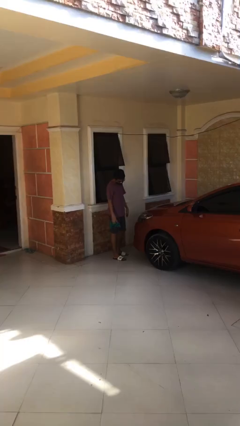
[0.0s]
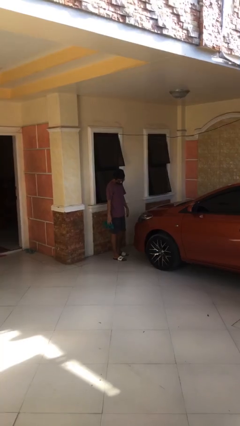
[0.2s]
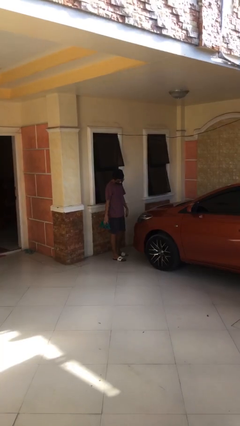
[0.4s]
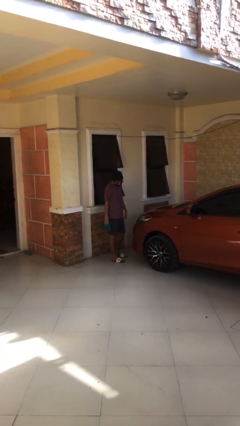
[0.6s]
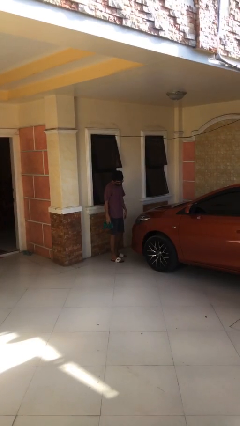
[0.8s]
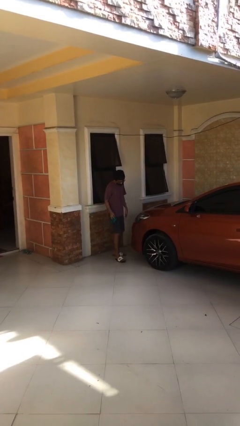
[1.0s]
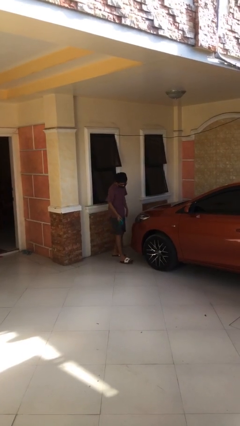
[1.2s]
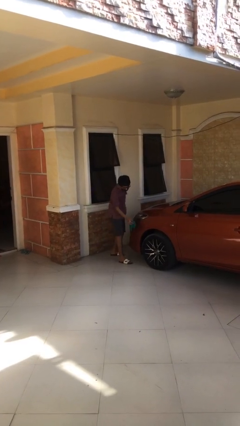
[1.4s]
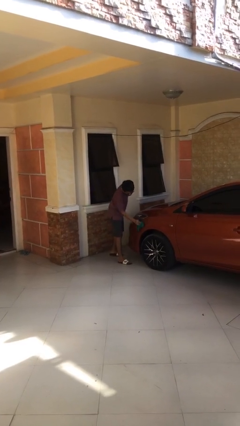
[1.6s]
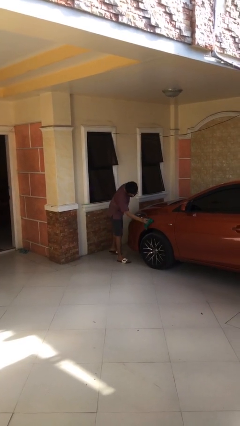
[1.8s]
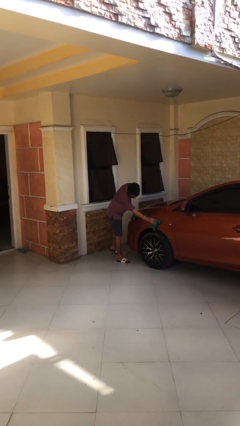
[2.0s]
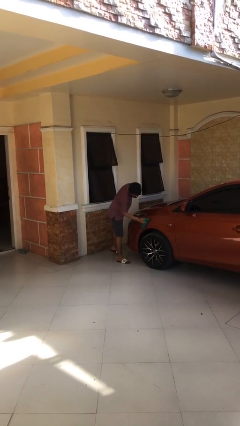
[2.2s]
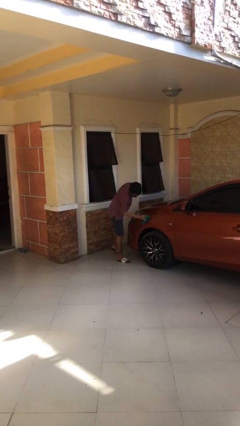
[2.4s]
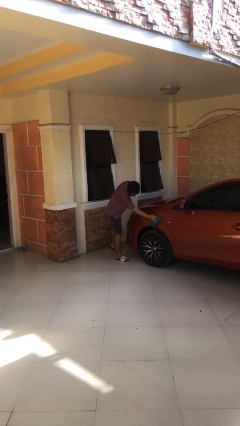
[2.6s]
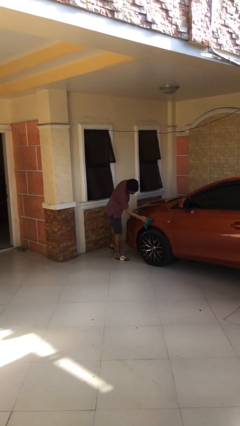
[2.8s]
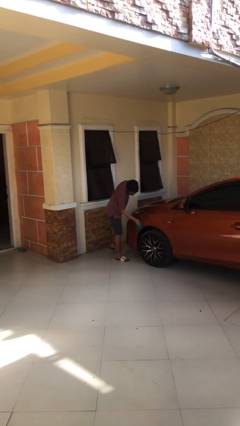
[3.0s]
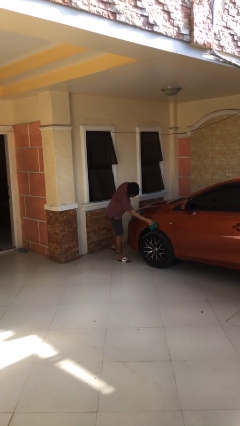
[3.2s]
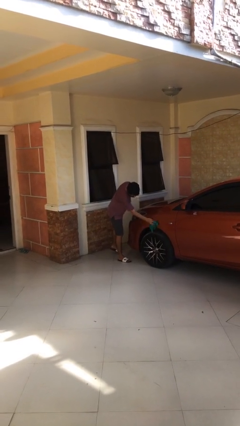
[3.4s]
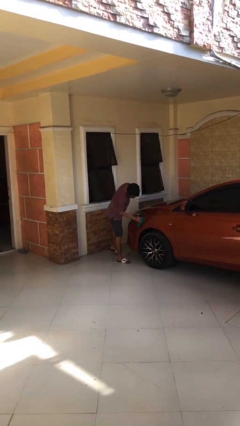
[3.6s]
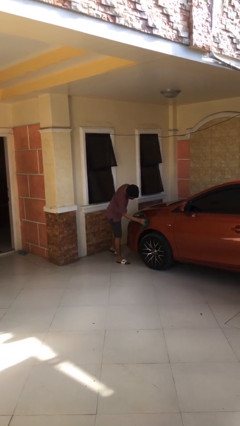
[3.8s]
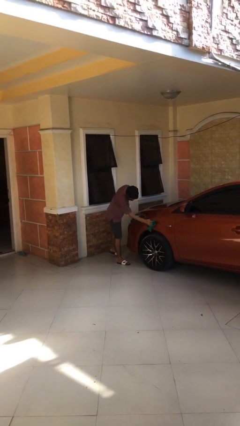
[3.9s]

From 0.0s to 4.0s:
person polishes car with rag

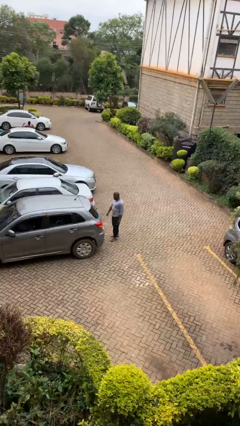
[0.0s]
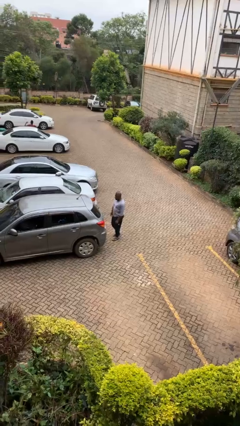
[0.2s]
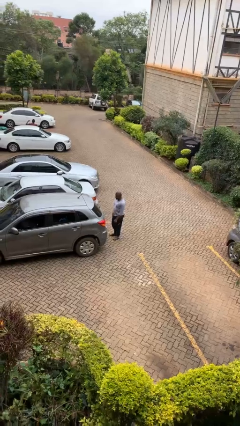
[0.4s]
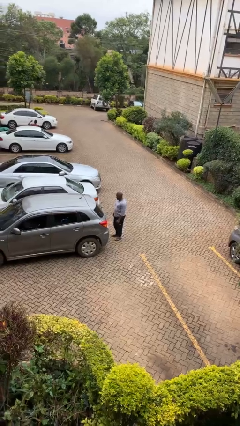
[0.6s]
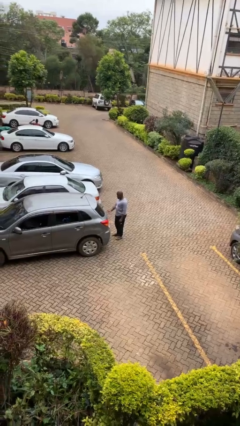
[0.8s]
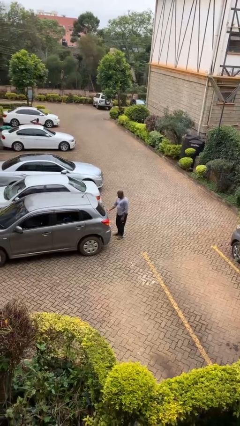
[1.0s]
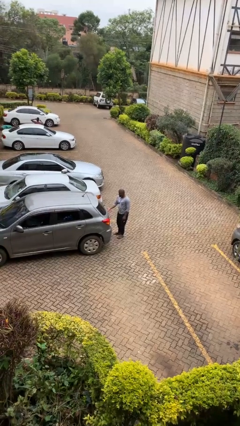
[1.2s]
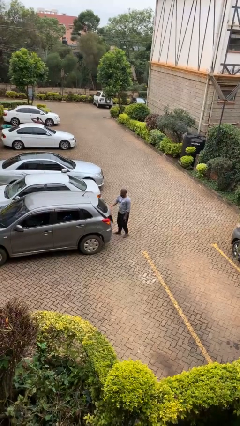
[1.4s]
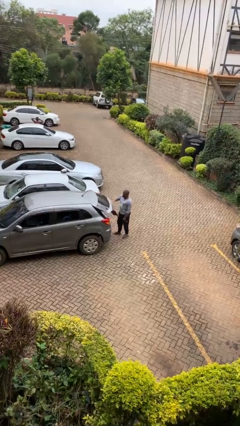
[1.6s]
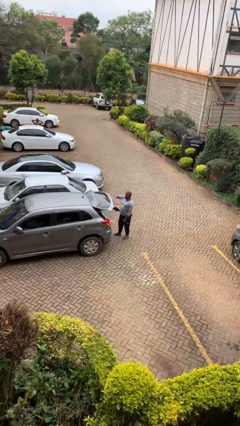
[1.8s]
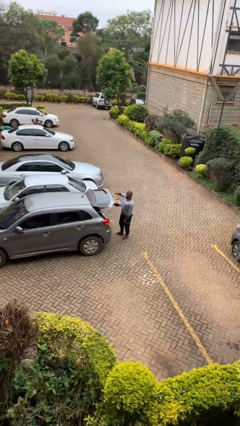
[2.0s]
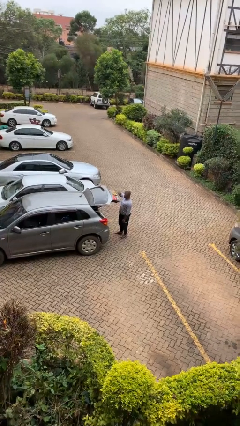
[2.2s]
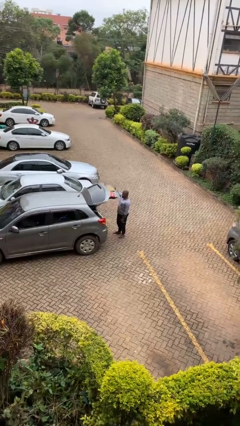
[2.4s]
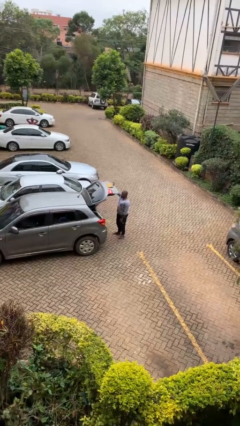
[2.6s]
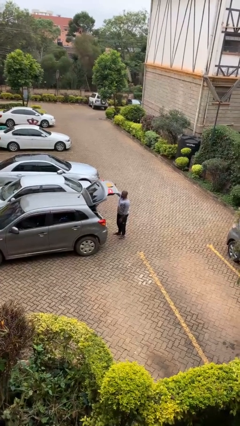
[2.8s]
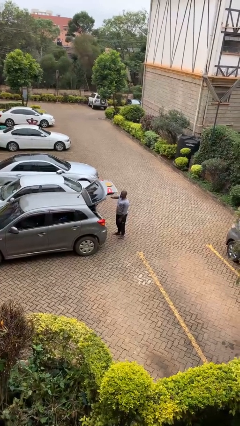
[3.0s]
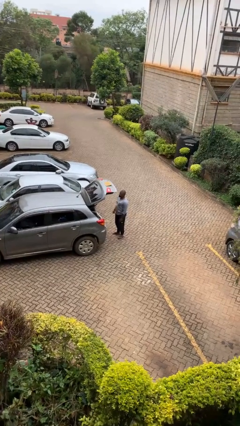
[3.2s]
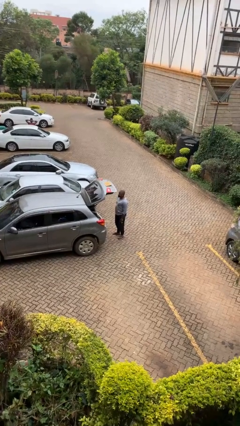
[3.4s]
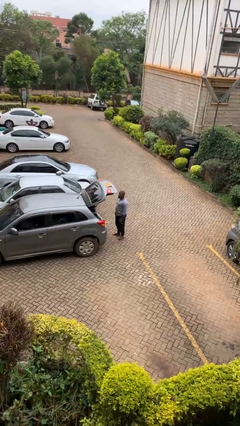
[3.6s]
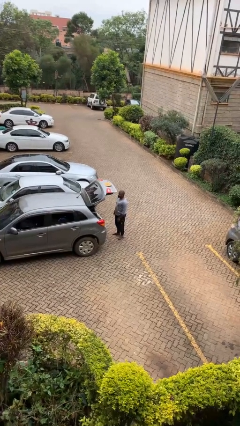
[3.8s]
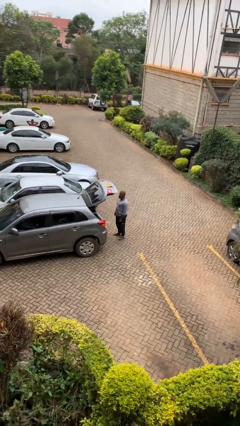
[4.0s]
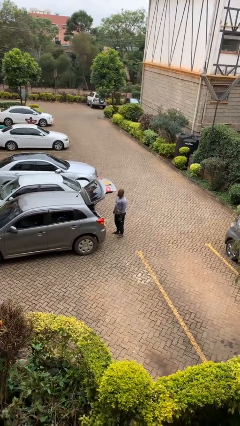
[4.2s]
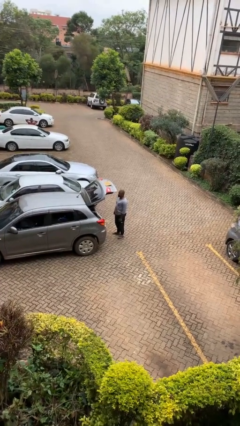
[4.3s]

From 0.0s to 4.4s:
person opens car trunk

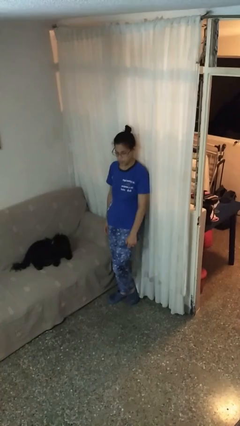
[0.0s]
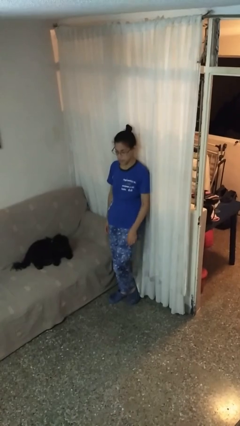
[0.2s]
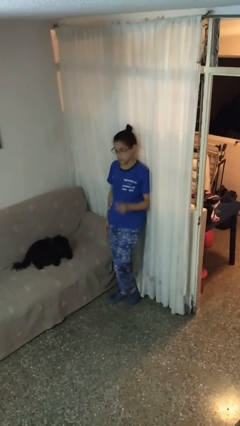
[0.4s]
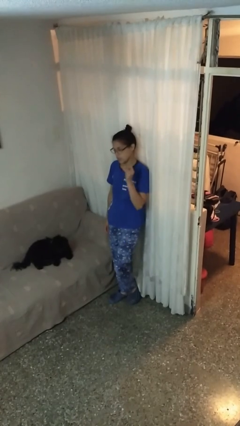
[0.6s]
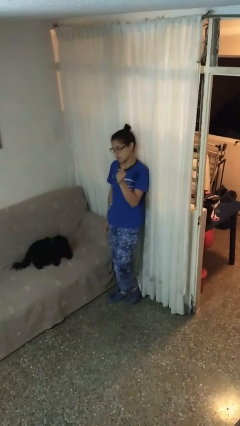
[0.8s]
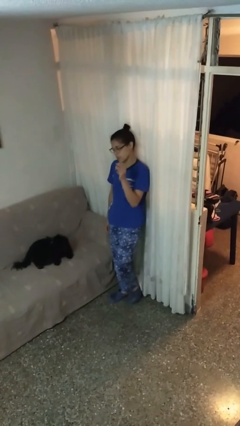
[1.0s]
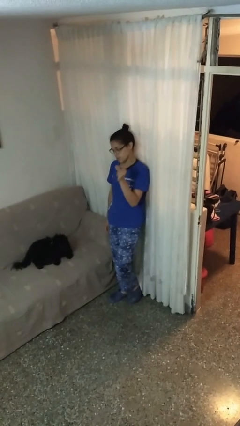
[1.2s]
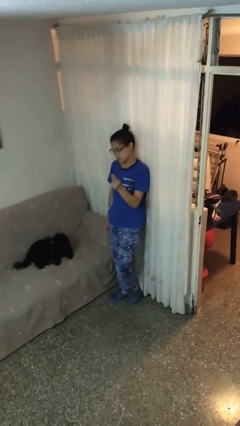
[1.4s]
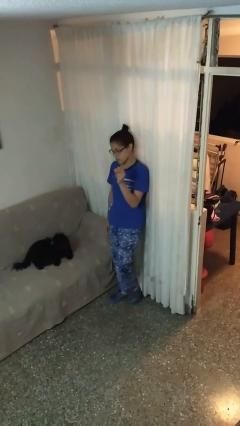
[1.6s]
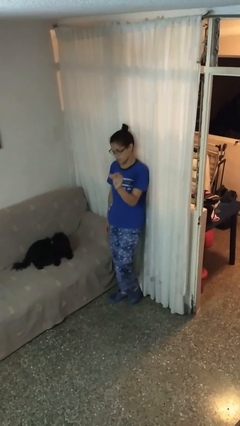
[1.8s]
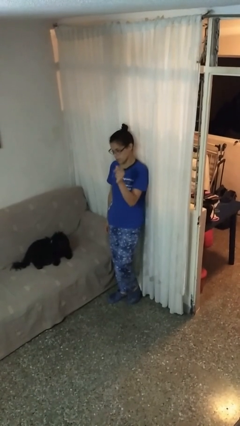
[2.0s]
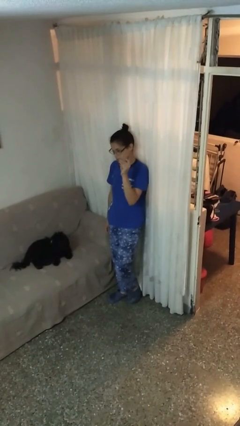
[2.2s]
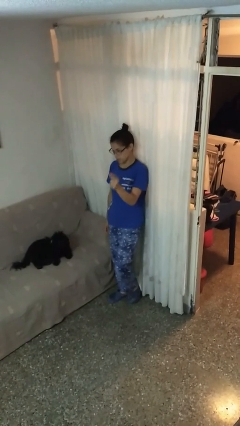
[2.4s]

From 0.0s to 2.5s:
person snaps fingers

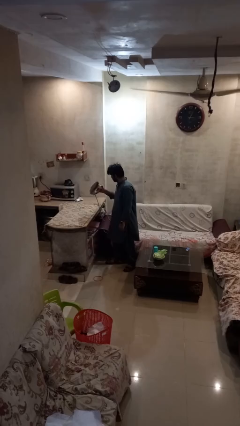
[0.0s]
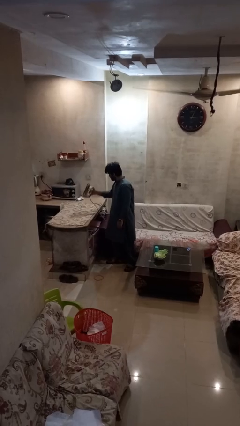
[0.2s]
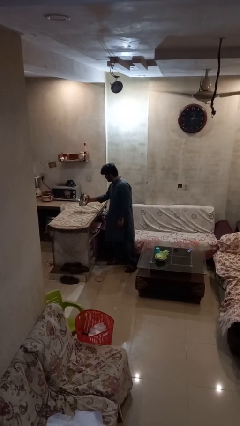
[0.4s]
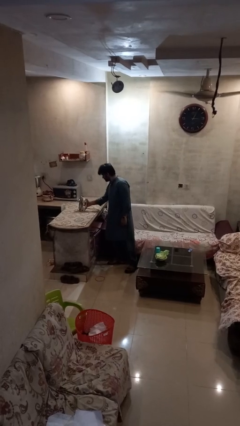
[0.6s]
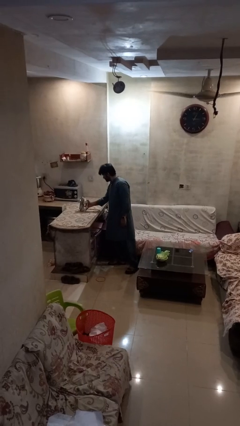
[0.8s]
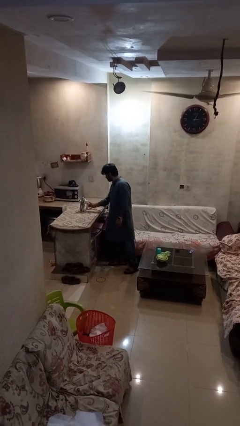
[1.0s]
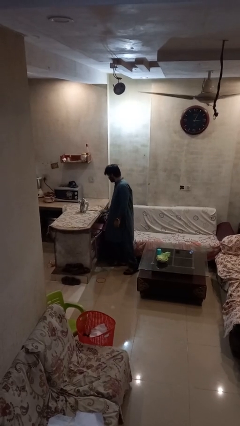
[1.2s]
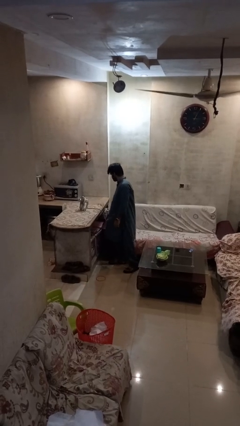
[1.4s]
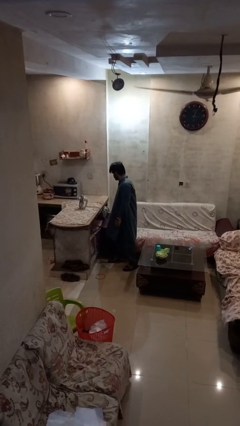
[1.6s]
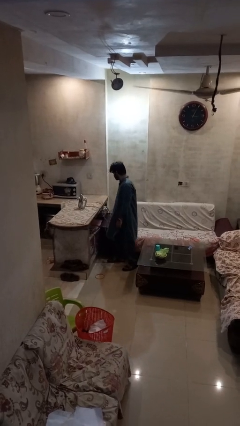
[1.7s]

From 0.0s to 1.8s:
person puts down object on countertop

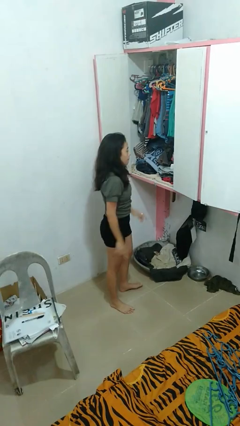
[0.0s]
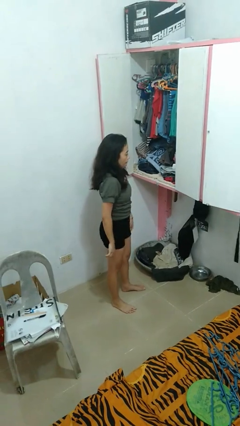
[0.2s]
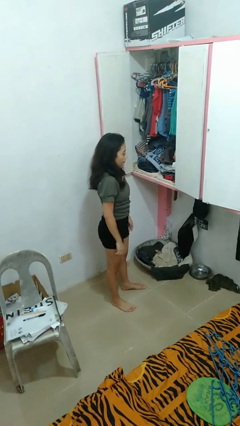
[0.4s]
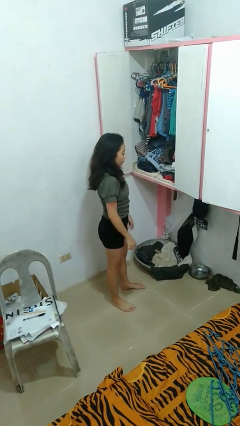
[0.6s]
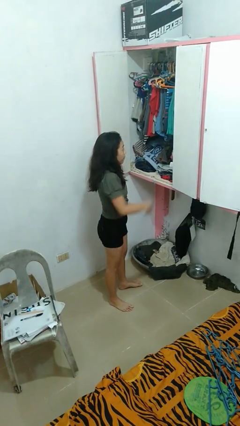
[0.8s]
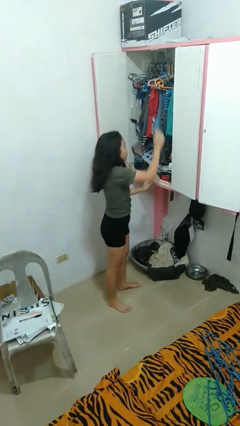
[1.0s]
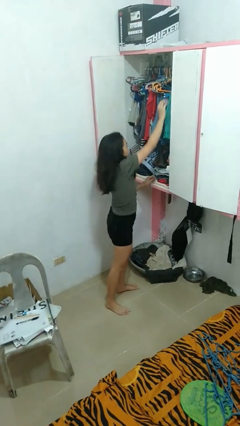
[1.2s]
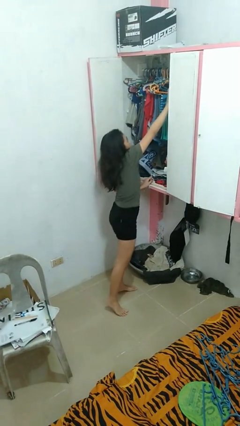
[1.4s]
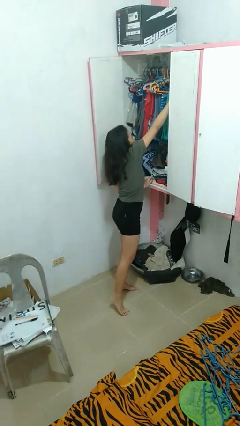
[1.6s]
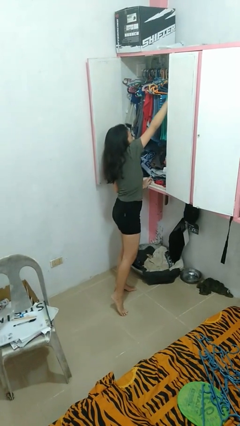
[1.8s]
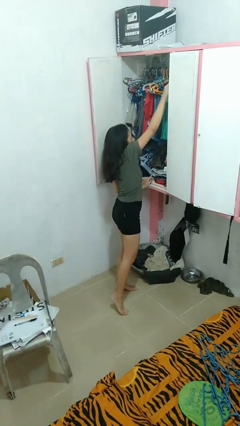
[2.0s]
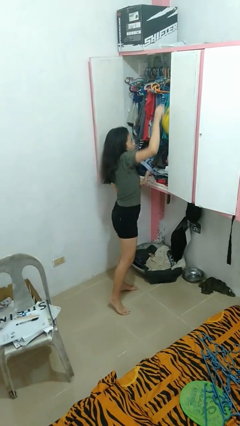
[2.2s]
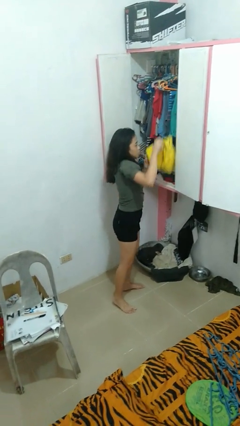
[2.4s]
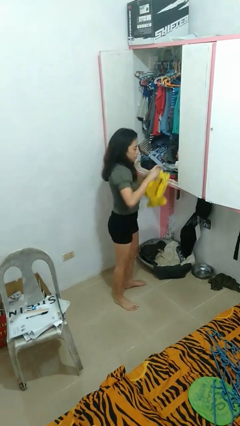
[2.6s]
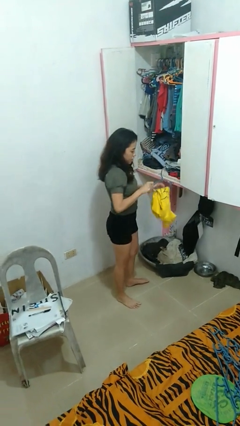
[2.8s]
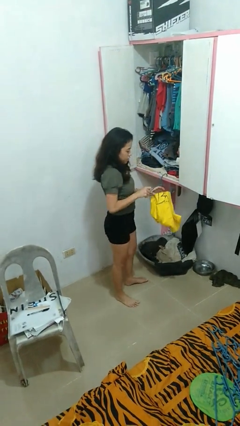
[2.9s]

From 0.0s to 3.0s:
person takes clothes from closet

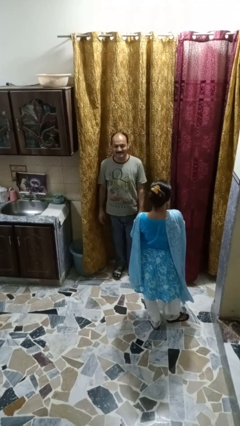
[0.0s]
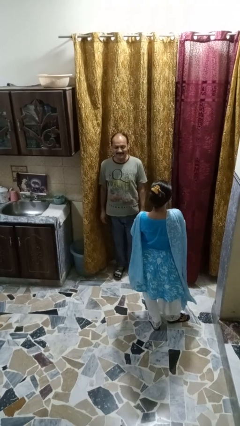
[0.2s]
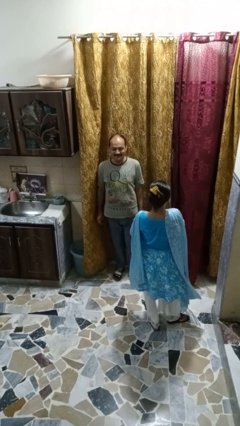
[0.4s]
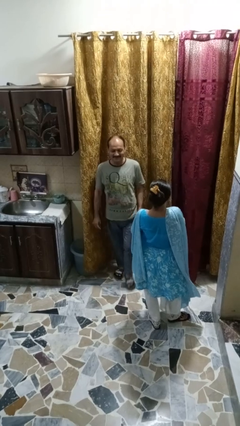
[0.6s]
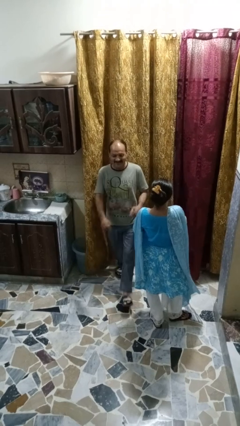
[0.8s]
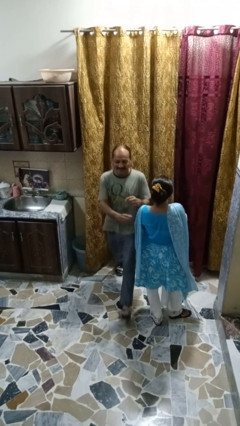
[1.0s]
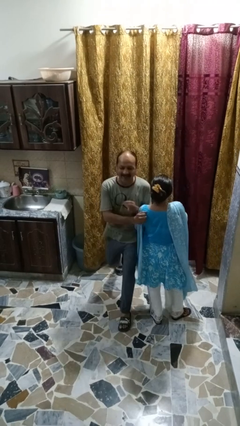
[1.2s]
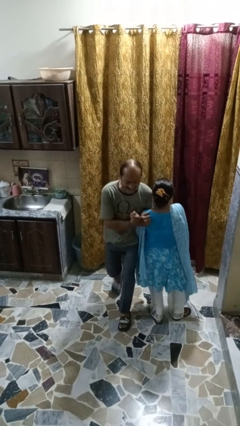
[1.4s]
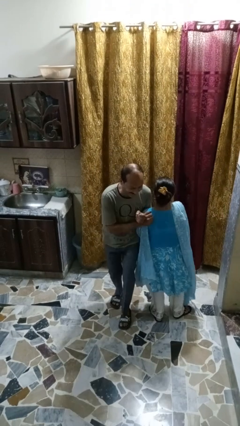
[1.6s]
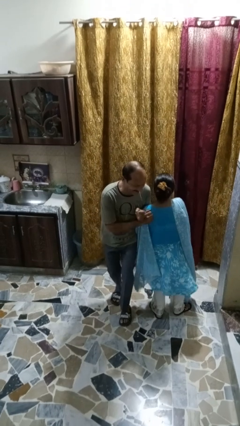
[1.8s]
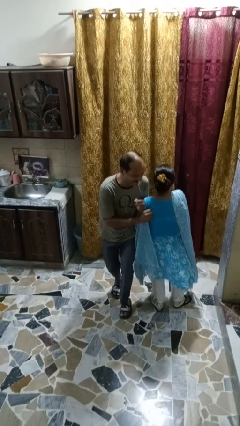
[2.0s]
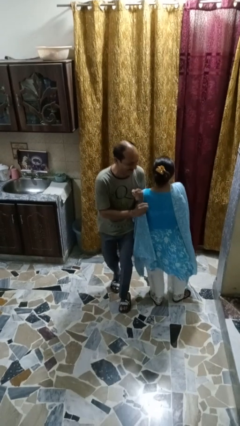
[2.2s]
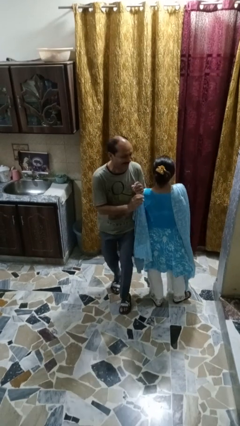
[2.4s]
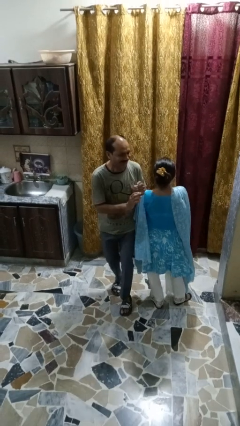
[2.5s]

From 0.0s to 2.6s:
person bumps into person
